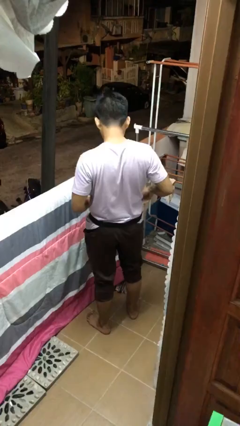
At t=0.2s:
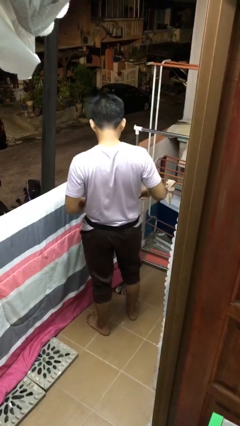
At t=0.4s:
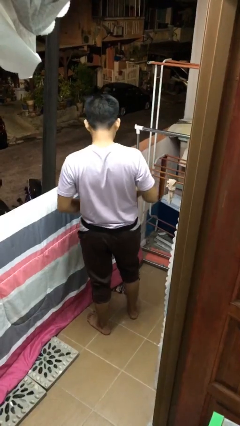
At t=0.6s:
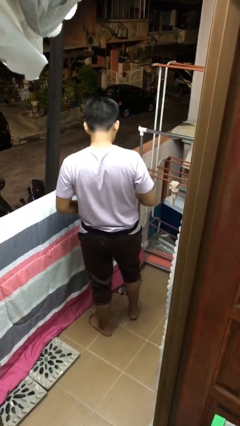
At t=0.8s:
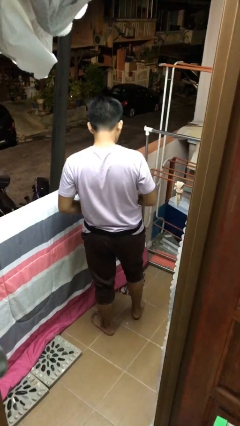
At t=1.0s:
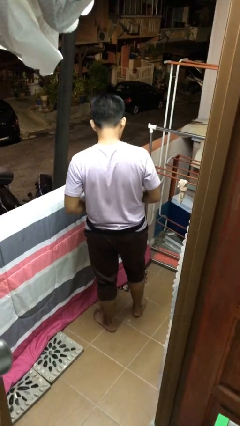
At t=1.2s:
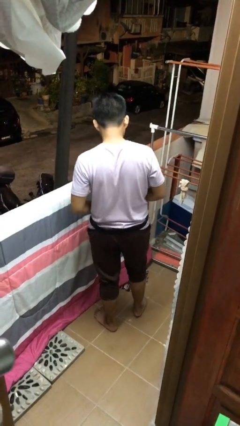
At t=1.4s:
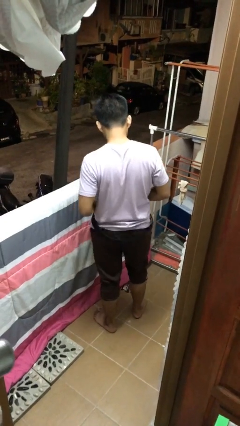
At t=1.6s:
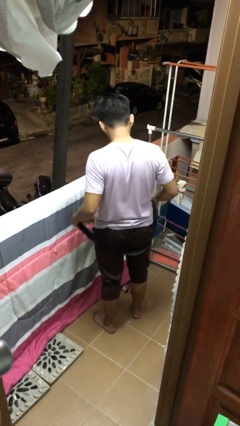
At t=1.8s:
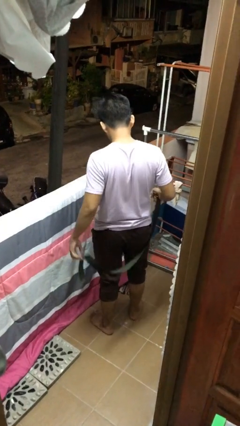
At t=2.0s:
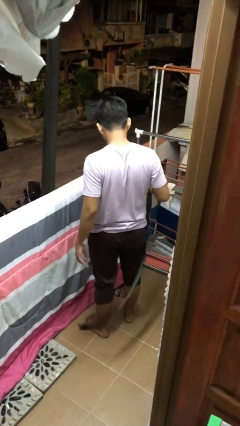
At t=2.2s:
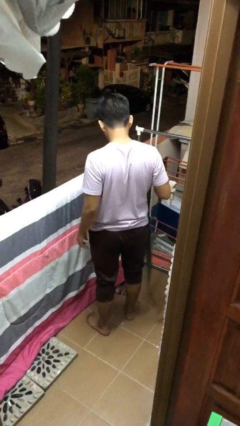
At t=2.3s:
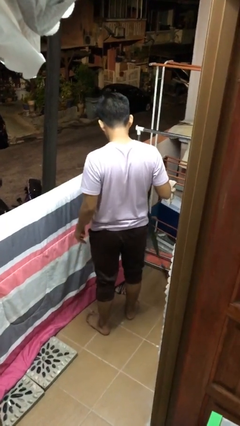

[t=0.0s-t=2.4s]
person takes off belt

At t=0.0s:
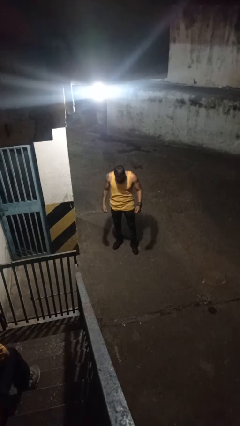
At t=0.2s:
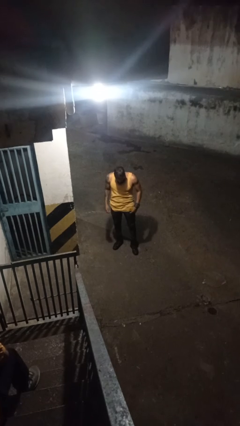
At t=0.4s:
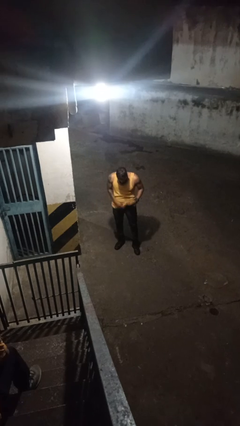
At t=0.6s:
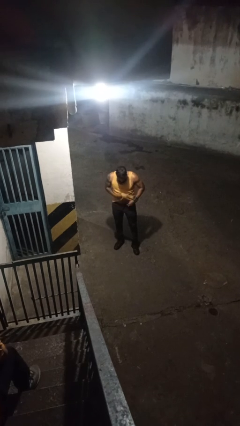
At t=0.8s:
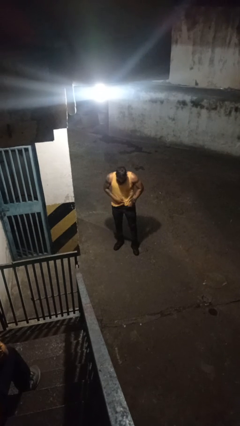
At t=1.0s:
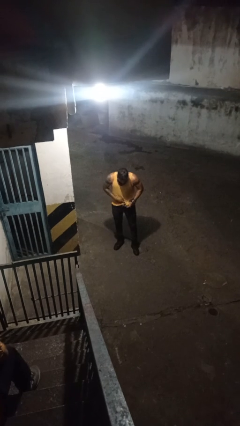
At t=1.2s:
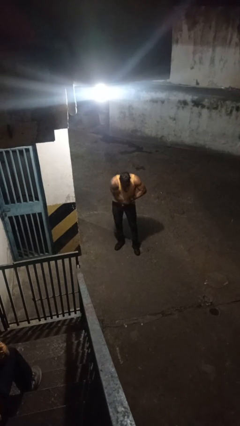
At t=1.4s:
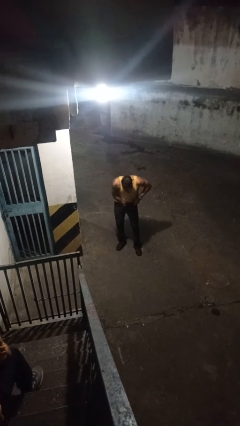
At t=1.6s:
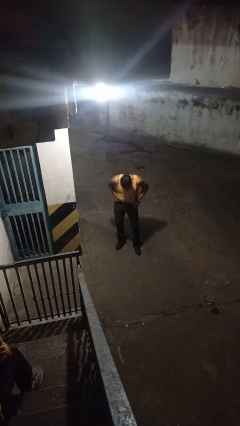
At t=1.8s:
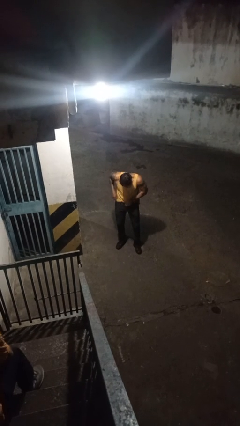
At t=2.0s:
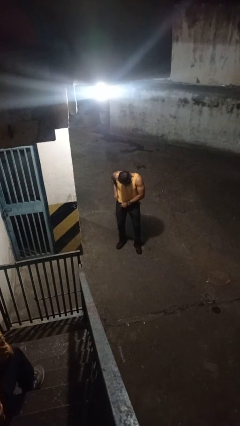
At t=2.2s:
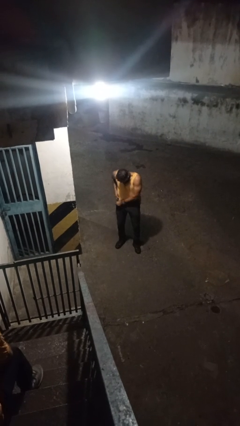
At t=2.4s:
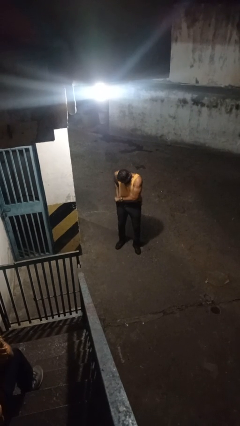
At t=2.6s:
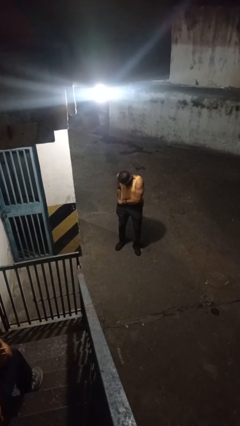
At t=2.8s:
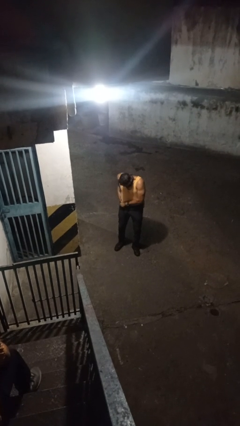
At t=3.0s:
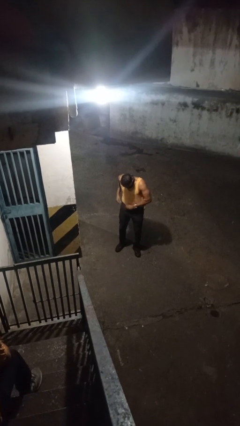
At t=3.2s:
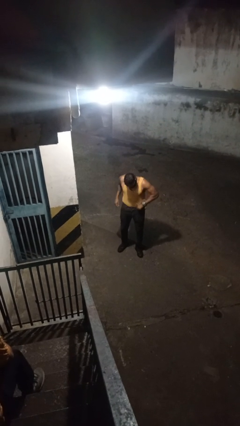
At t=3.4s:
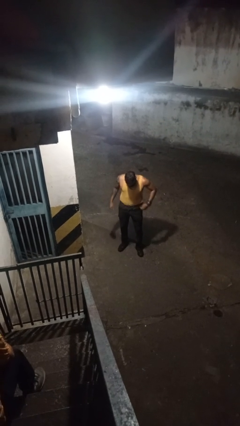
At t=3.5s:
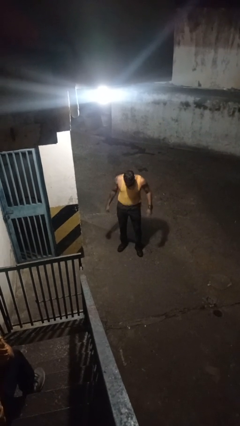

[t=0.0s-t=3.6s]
person tucks in shirt

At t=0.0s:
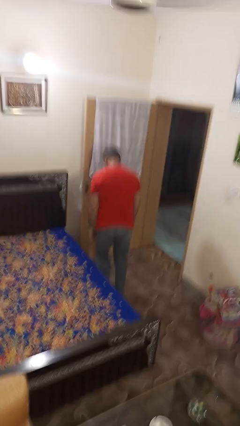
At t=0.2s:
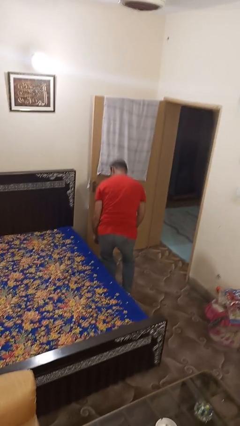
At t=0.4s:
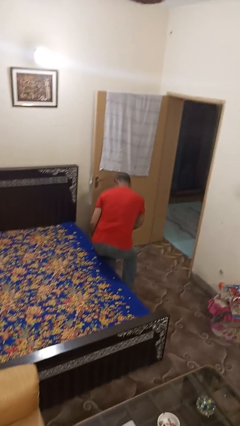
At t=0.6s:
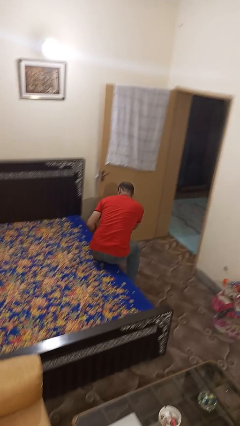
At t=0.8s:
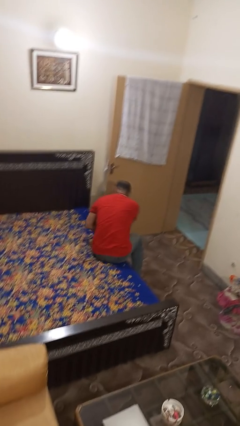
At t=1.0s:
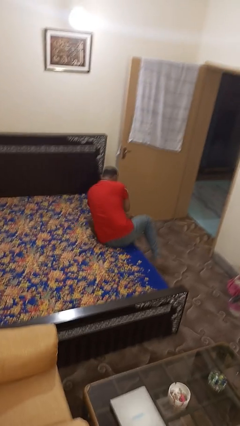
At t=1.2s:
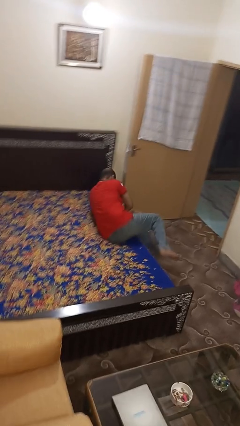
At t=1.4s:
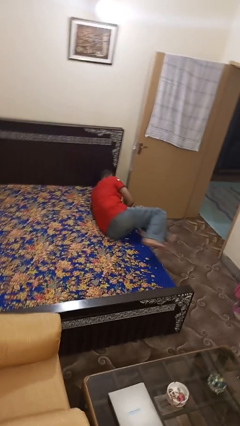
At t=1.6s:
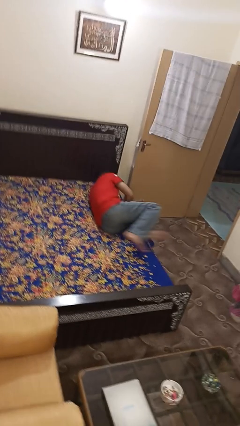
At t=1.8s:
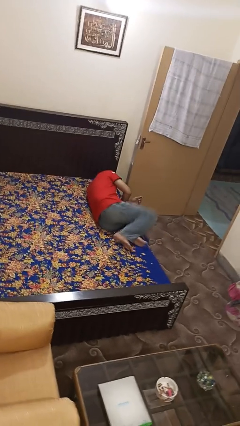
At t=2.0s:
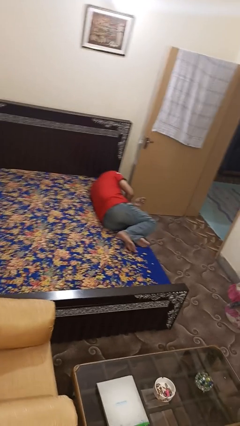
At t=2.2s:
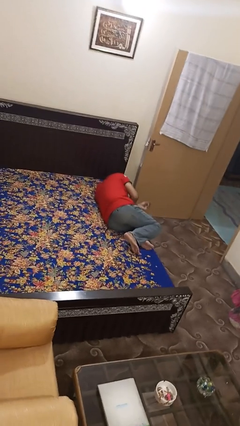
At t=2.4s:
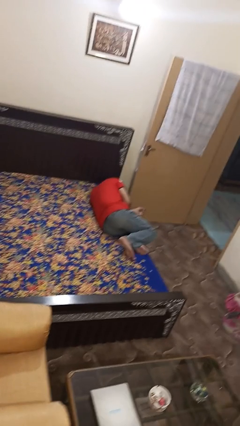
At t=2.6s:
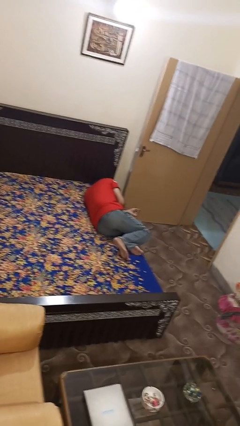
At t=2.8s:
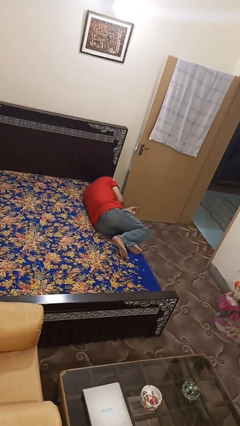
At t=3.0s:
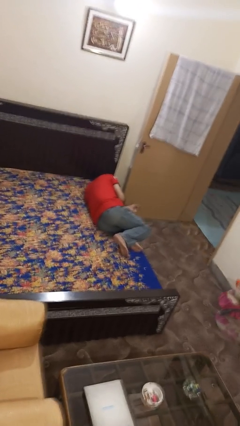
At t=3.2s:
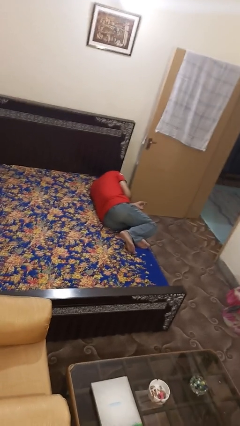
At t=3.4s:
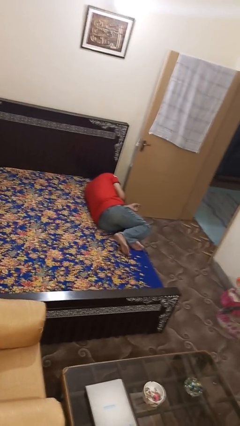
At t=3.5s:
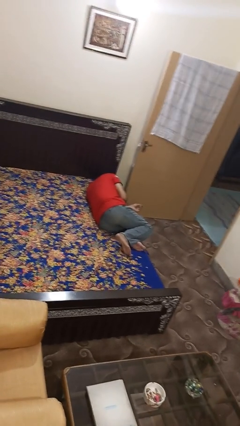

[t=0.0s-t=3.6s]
person lies down on bed

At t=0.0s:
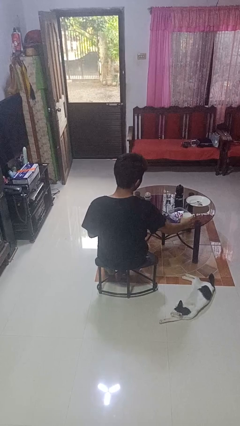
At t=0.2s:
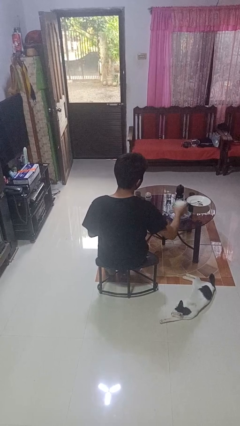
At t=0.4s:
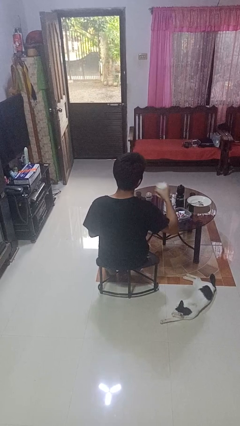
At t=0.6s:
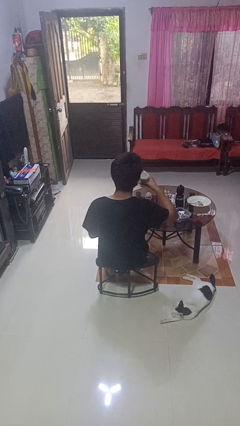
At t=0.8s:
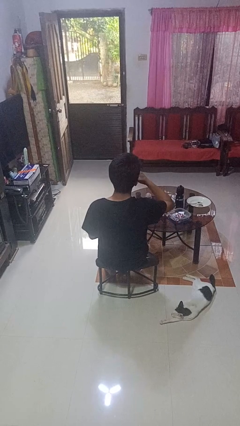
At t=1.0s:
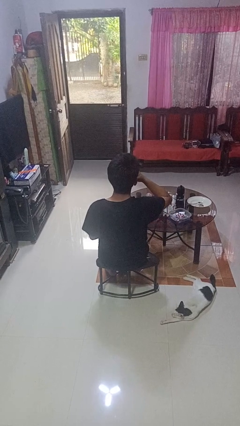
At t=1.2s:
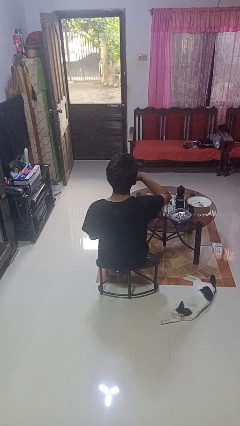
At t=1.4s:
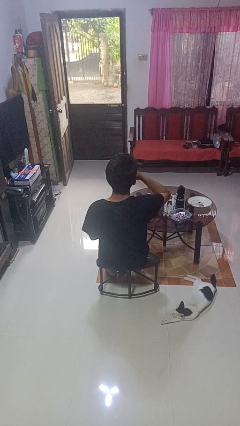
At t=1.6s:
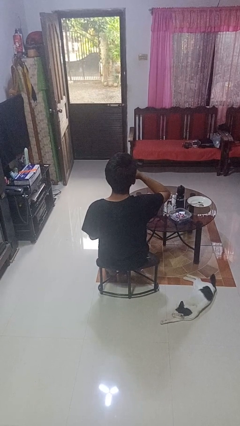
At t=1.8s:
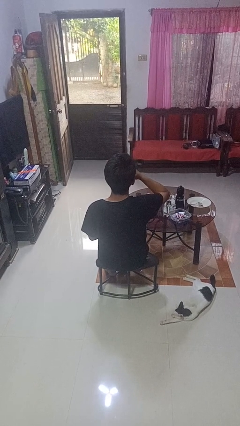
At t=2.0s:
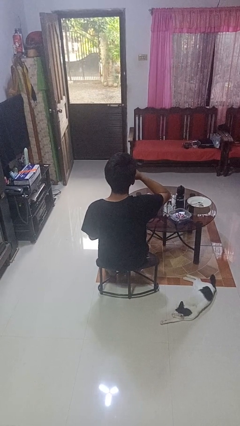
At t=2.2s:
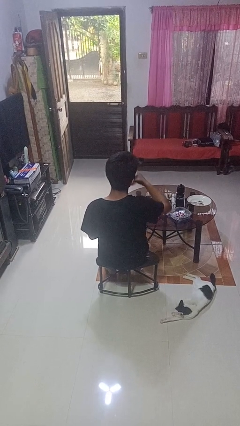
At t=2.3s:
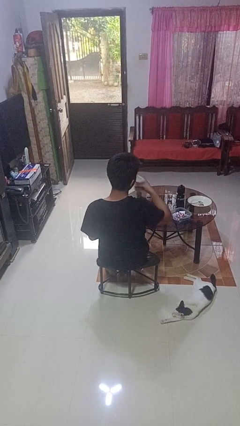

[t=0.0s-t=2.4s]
person drinks from cup

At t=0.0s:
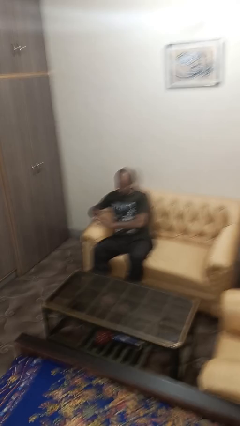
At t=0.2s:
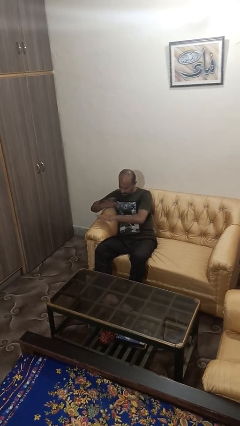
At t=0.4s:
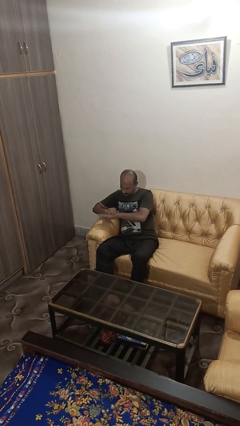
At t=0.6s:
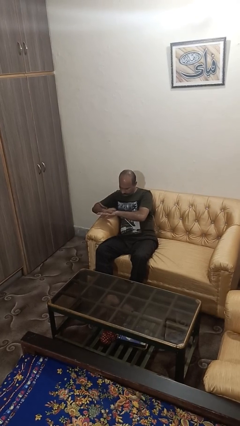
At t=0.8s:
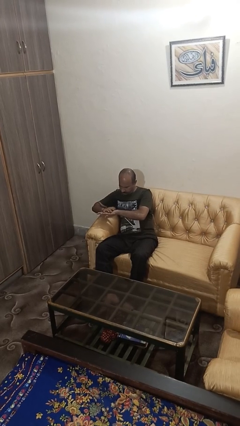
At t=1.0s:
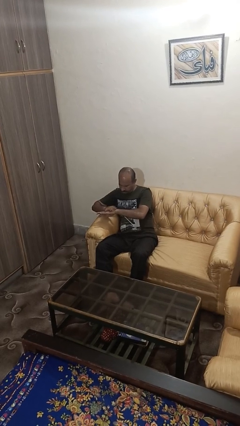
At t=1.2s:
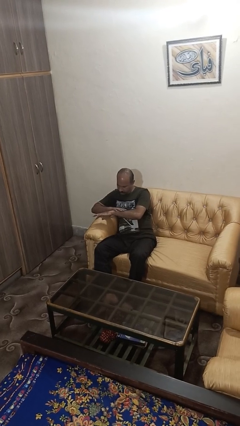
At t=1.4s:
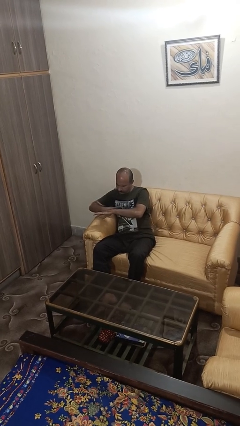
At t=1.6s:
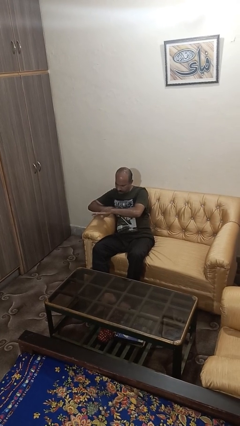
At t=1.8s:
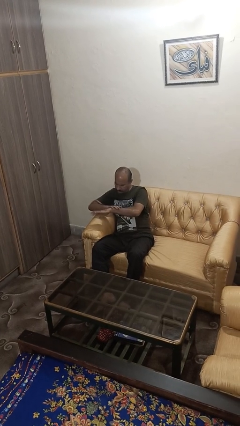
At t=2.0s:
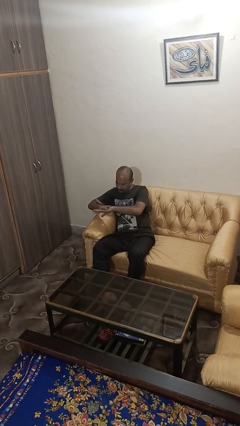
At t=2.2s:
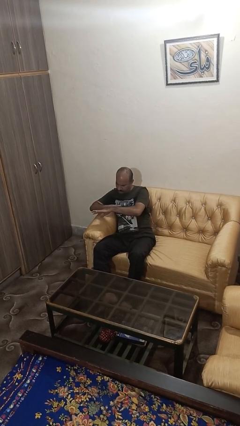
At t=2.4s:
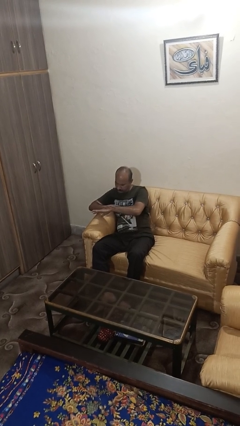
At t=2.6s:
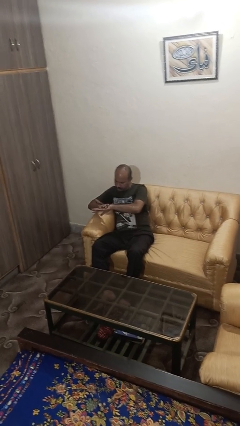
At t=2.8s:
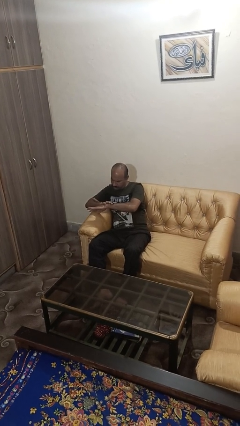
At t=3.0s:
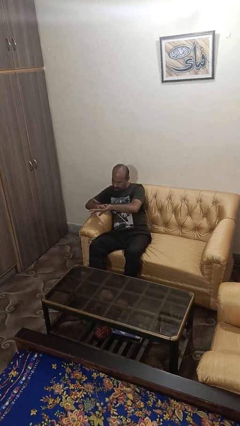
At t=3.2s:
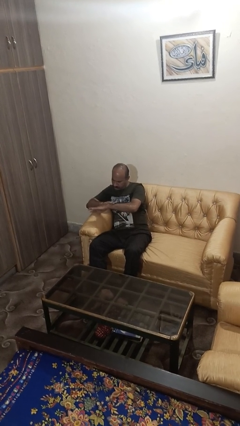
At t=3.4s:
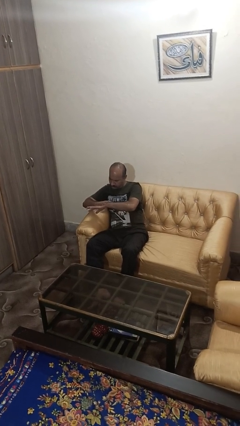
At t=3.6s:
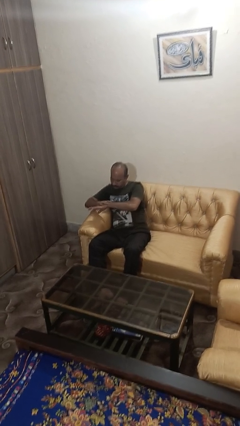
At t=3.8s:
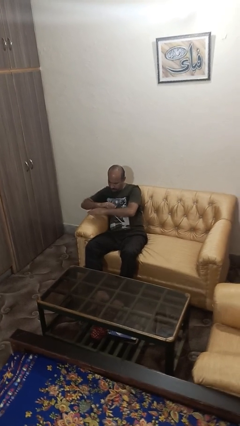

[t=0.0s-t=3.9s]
person swats bug

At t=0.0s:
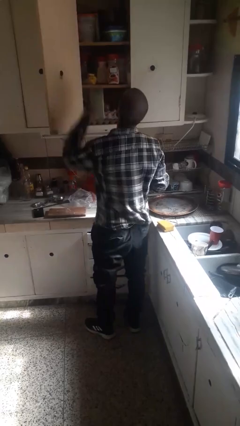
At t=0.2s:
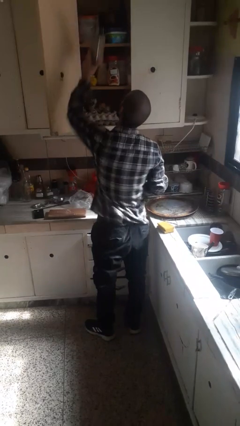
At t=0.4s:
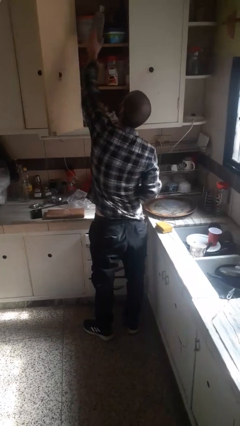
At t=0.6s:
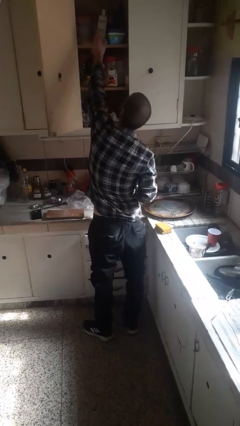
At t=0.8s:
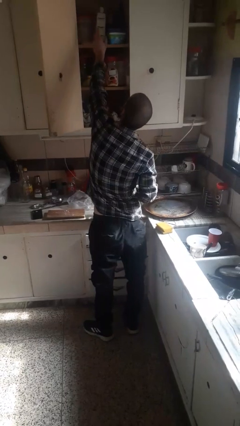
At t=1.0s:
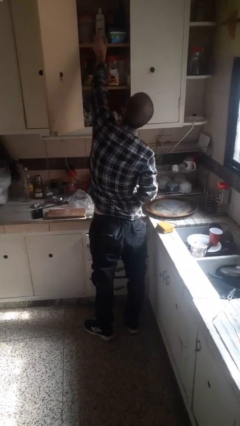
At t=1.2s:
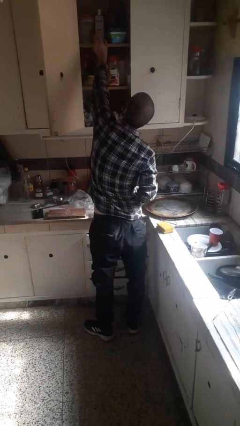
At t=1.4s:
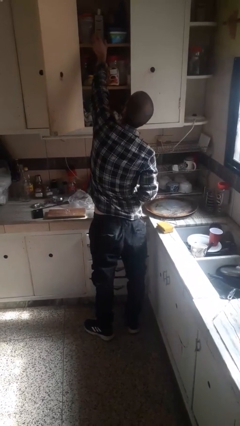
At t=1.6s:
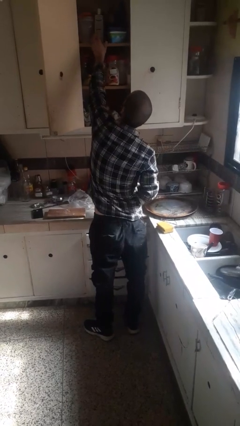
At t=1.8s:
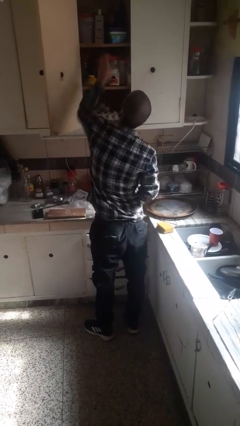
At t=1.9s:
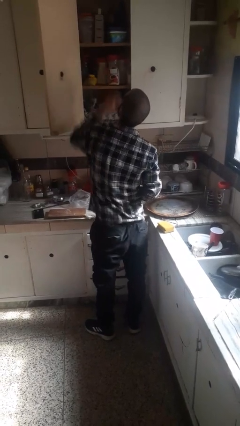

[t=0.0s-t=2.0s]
person picks up object from cabinet
